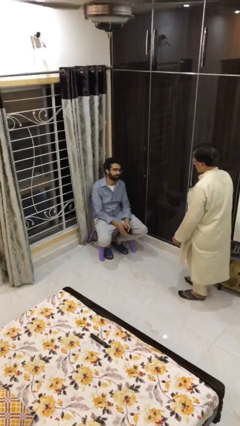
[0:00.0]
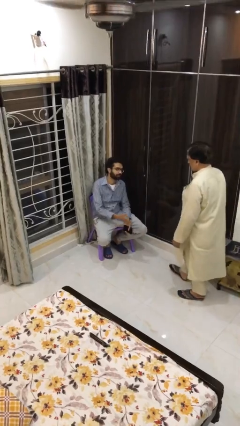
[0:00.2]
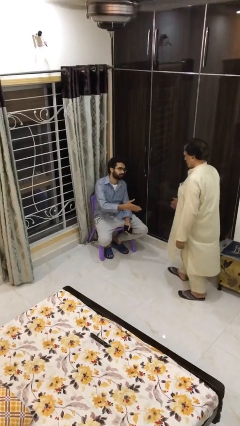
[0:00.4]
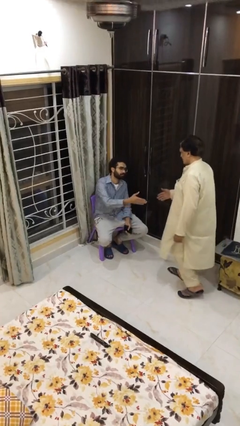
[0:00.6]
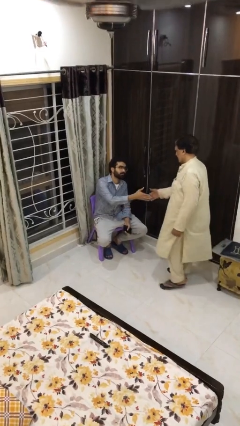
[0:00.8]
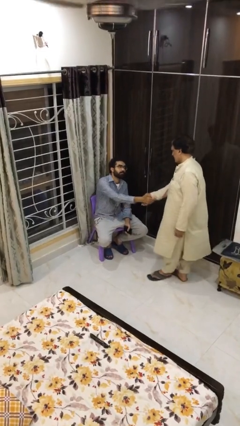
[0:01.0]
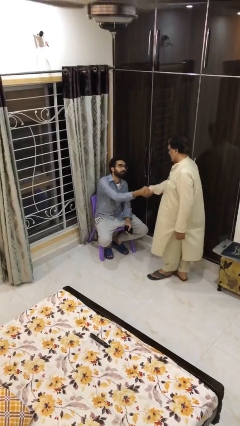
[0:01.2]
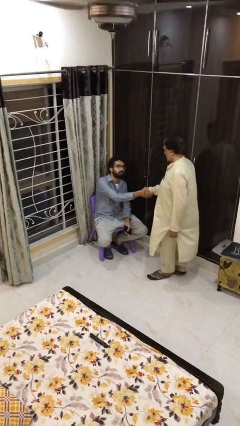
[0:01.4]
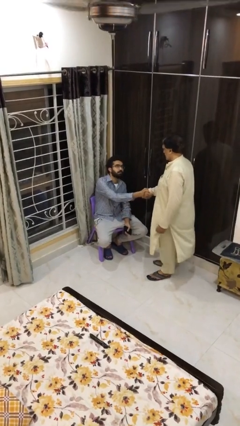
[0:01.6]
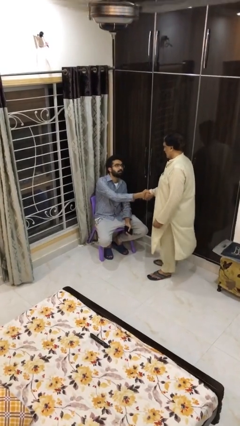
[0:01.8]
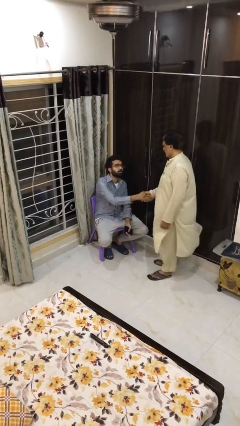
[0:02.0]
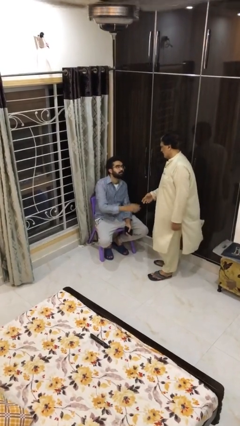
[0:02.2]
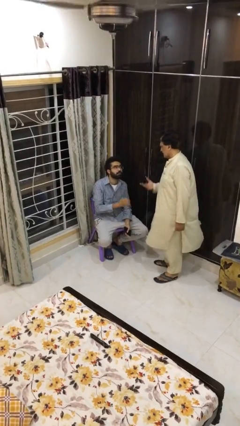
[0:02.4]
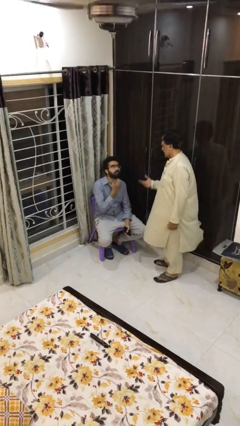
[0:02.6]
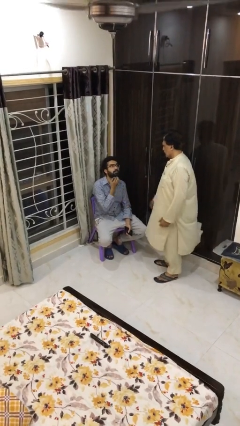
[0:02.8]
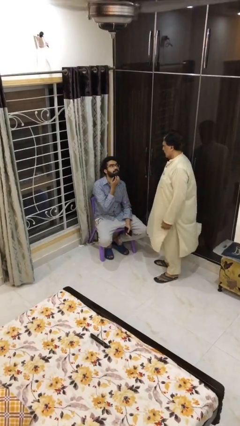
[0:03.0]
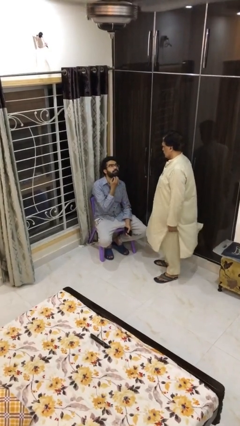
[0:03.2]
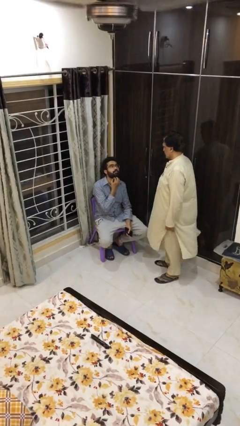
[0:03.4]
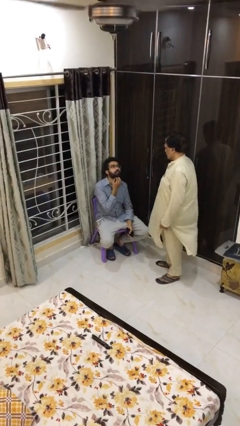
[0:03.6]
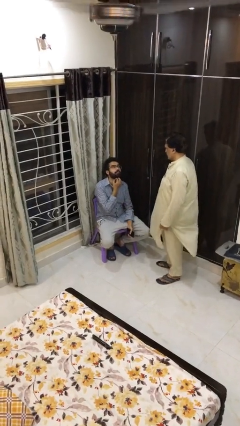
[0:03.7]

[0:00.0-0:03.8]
person shakes hand

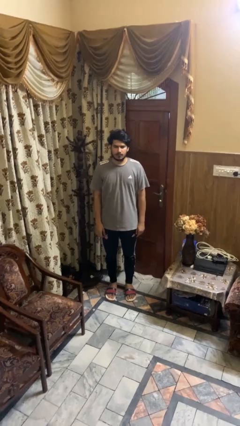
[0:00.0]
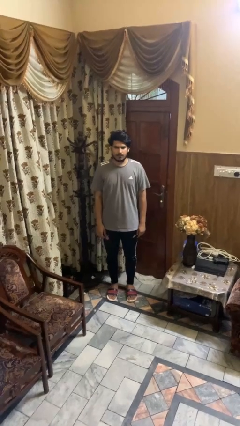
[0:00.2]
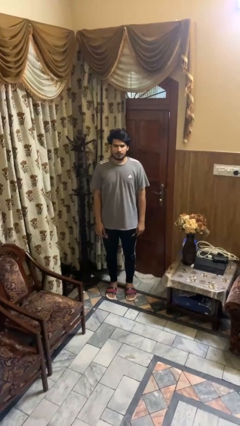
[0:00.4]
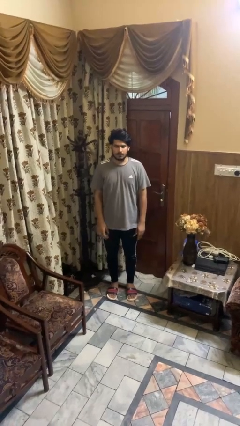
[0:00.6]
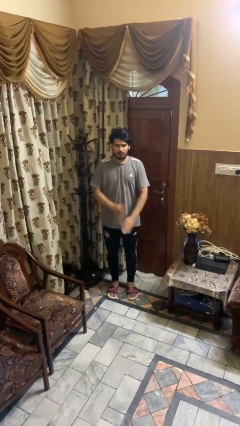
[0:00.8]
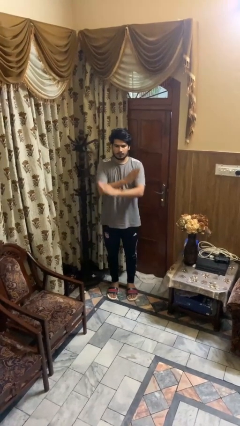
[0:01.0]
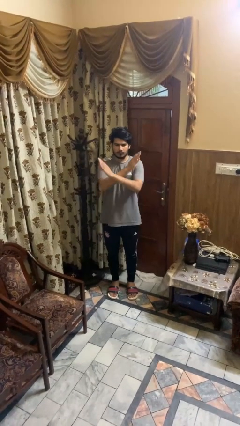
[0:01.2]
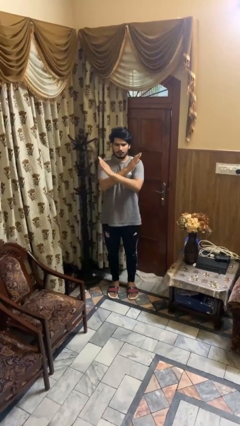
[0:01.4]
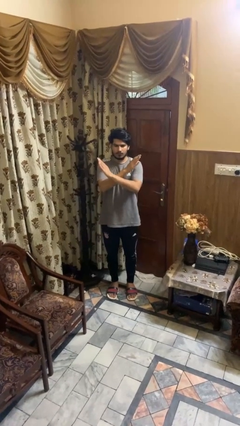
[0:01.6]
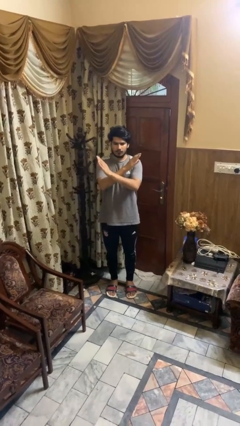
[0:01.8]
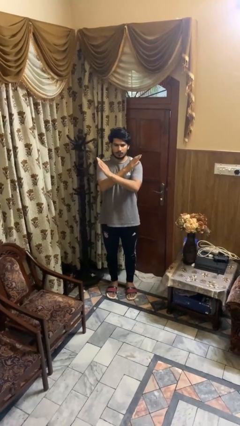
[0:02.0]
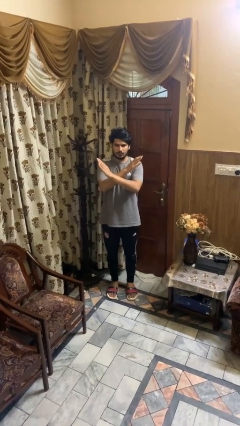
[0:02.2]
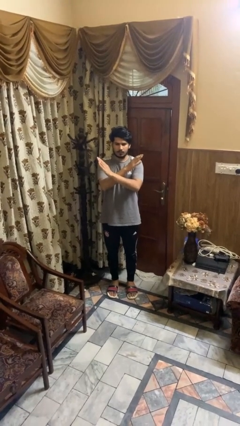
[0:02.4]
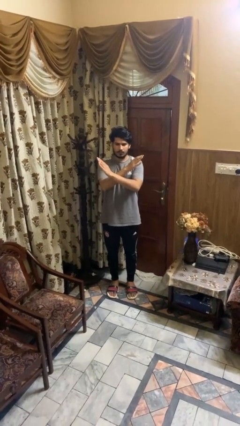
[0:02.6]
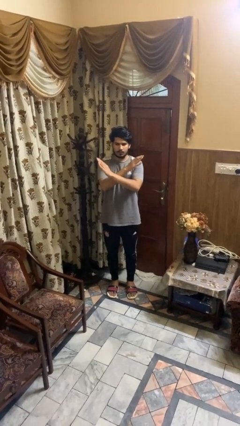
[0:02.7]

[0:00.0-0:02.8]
person gestures arms x

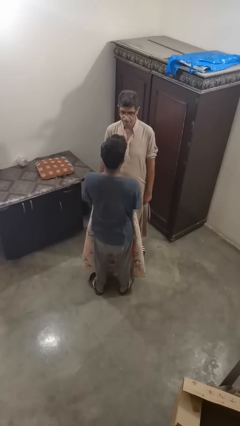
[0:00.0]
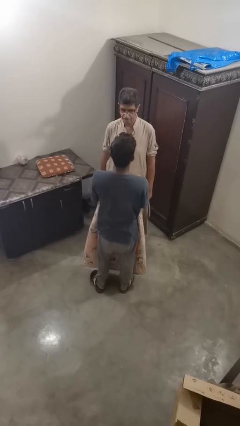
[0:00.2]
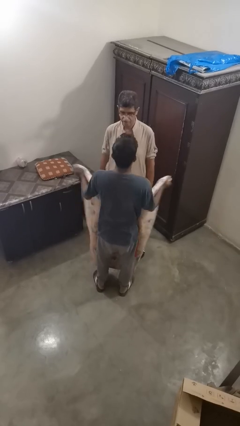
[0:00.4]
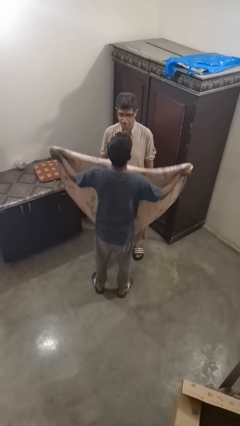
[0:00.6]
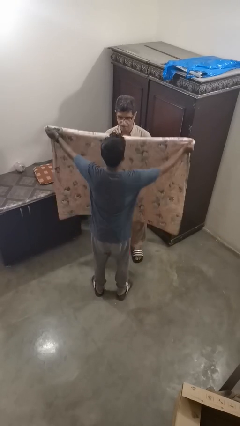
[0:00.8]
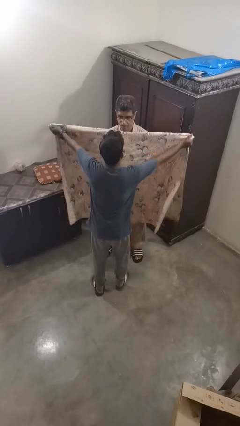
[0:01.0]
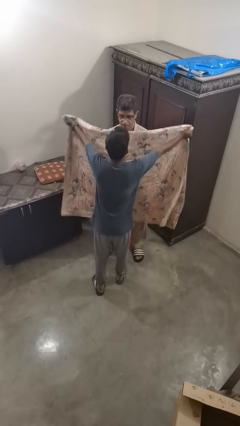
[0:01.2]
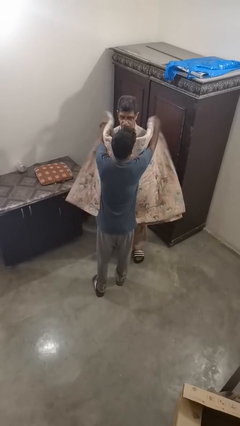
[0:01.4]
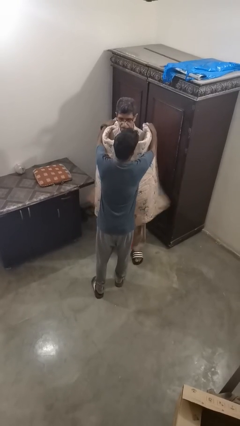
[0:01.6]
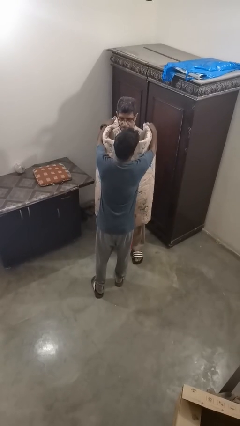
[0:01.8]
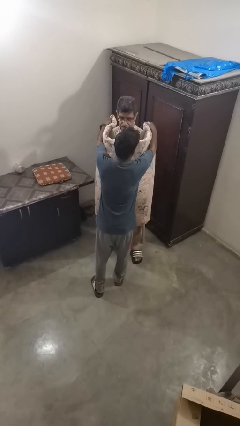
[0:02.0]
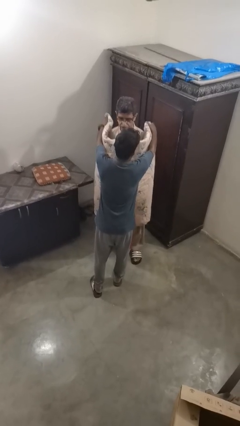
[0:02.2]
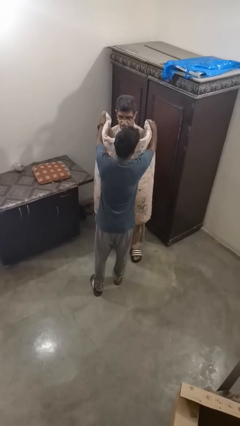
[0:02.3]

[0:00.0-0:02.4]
person covers friend with blanket

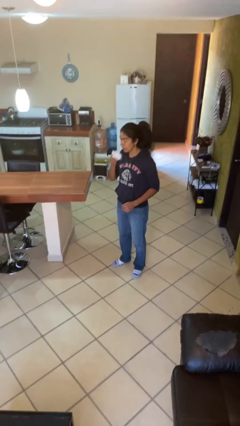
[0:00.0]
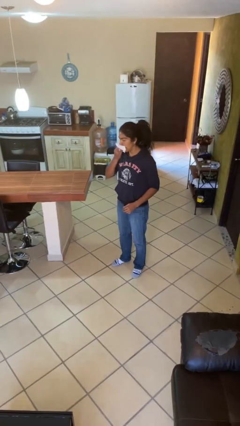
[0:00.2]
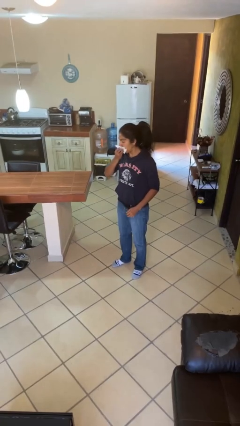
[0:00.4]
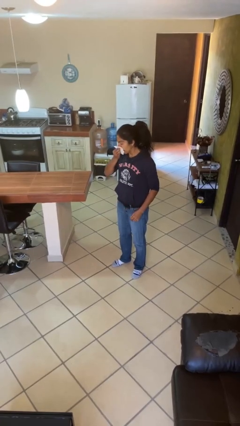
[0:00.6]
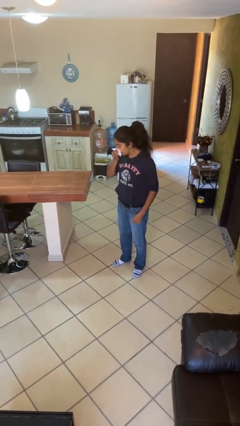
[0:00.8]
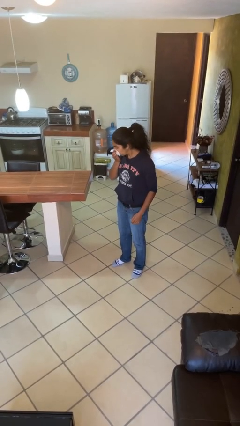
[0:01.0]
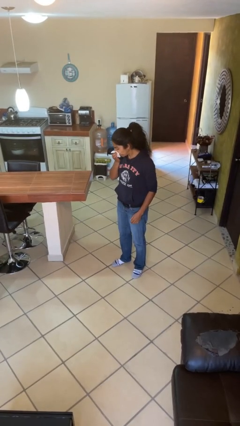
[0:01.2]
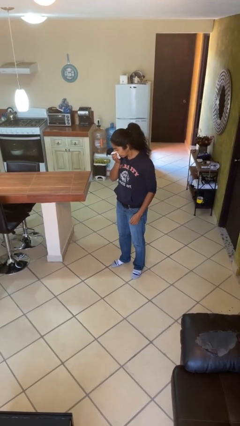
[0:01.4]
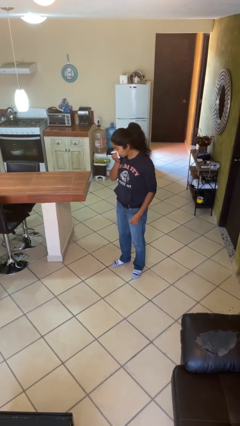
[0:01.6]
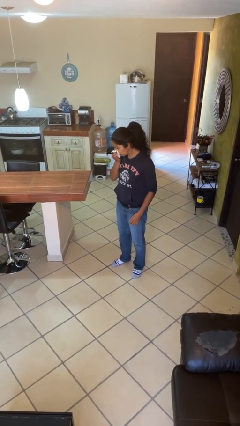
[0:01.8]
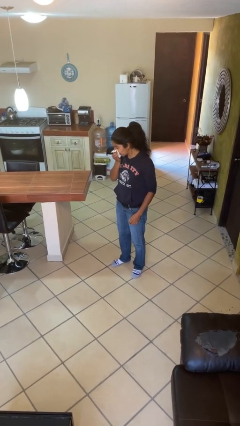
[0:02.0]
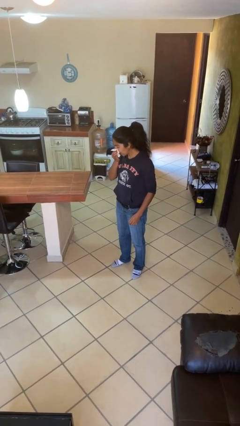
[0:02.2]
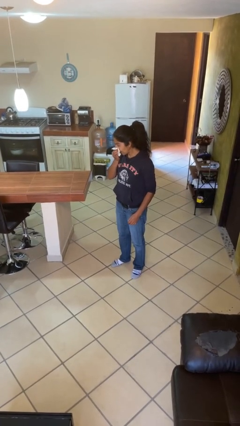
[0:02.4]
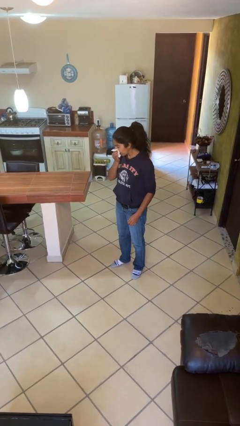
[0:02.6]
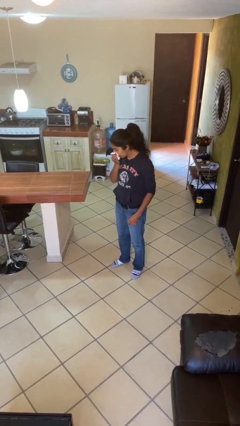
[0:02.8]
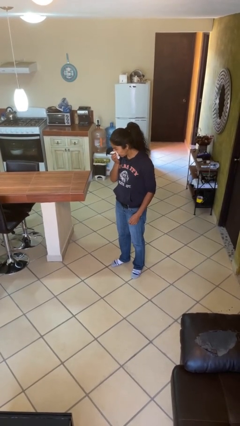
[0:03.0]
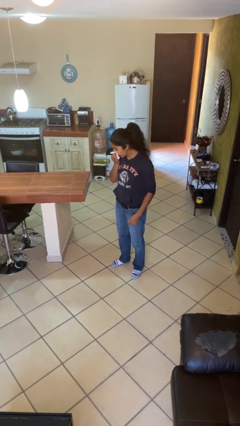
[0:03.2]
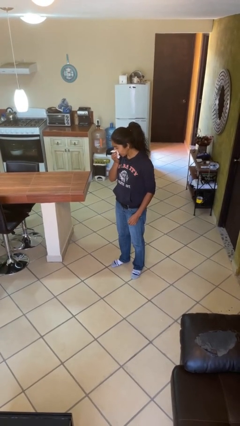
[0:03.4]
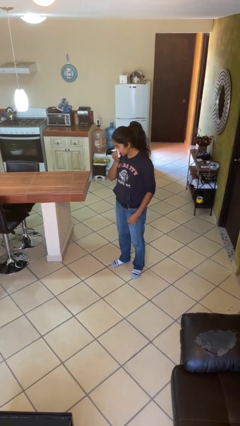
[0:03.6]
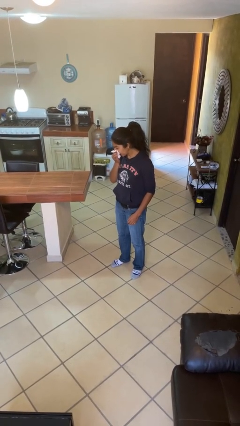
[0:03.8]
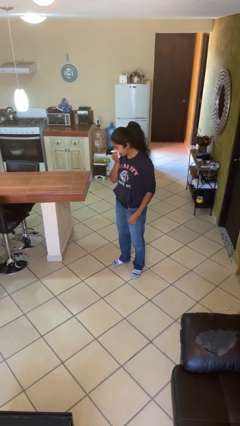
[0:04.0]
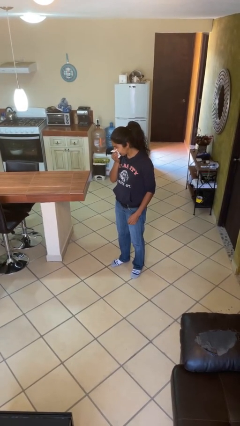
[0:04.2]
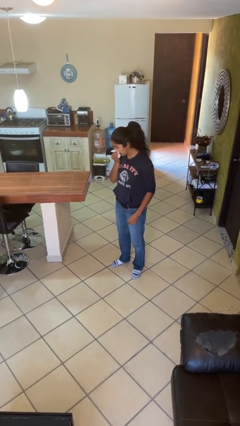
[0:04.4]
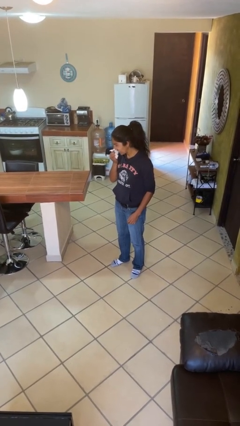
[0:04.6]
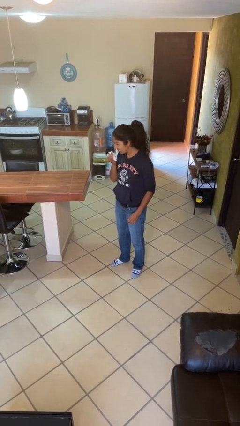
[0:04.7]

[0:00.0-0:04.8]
person blows nose

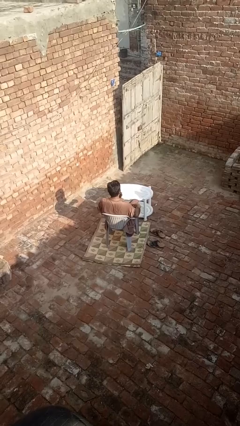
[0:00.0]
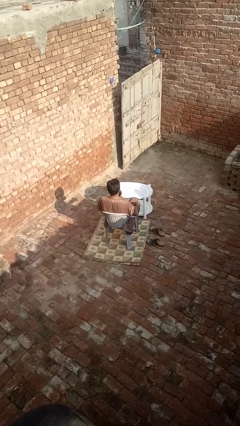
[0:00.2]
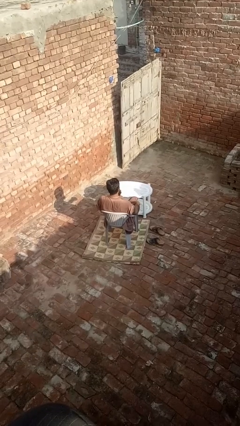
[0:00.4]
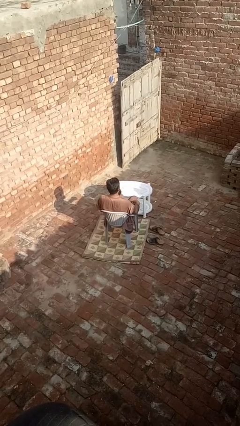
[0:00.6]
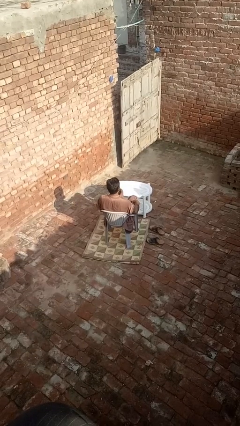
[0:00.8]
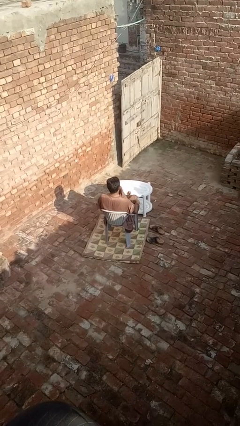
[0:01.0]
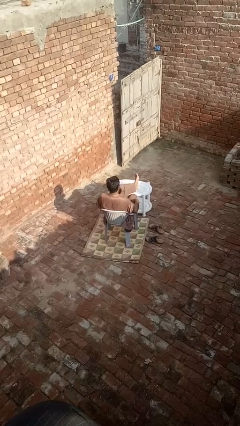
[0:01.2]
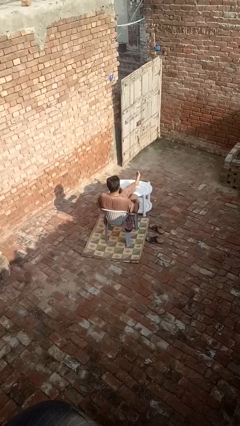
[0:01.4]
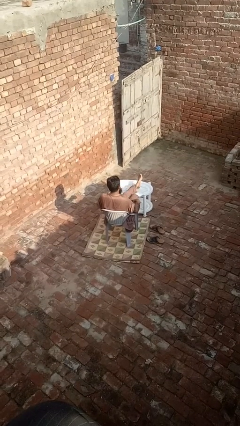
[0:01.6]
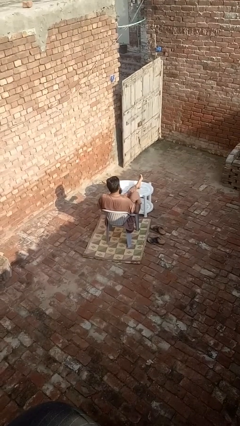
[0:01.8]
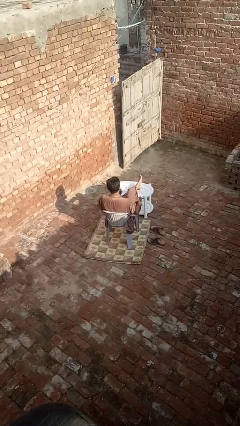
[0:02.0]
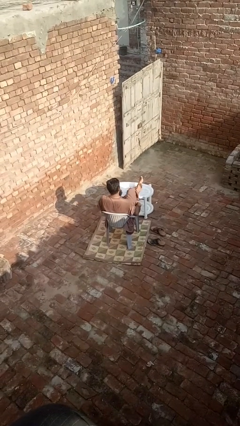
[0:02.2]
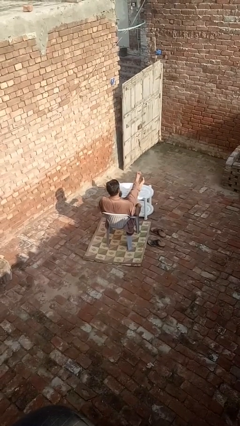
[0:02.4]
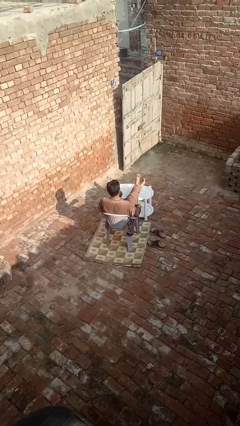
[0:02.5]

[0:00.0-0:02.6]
person puts feet up

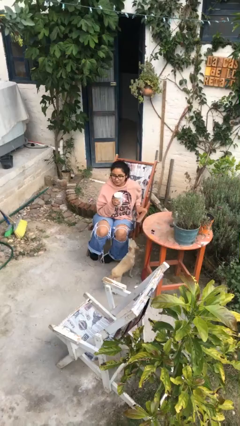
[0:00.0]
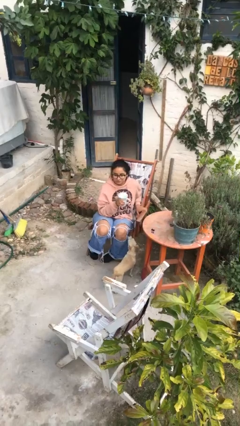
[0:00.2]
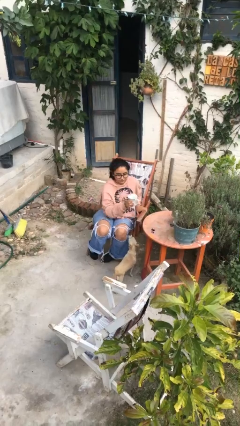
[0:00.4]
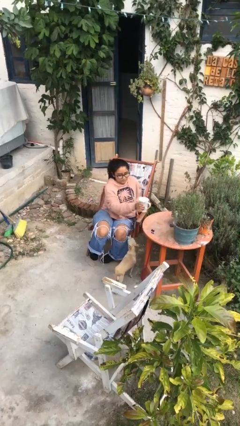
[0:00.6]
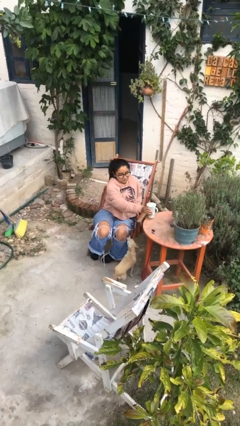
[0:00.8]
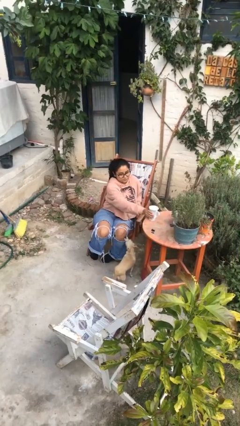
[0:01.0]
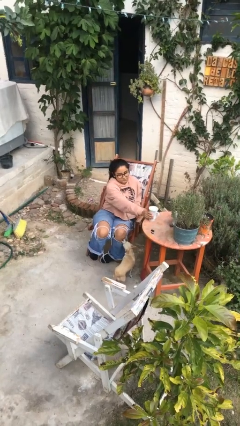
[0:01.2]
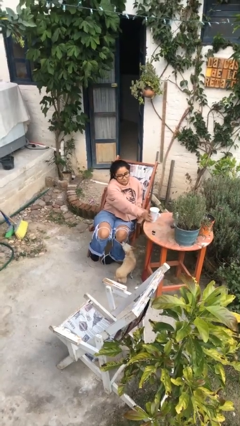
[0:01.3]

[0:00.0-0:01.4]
person puts down object on table
